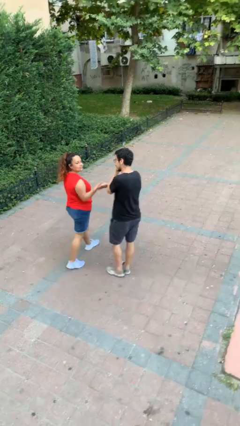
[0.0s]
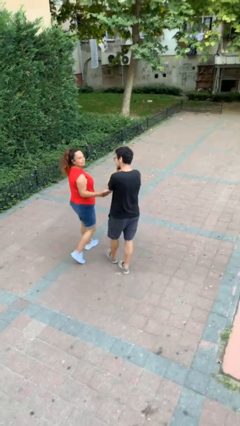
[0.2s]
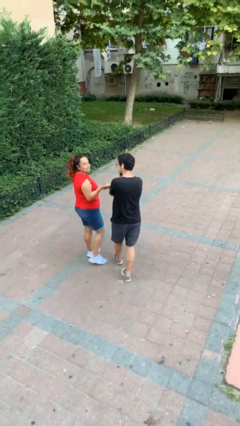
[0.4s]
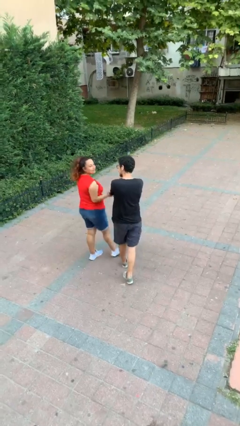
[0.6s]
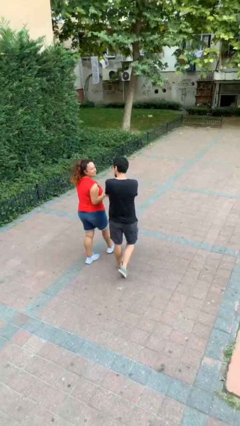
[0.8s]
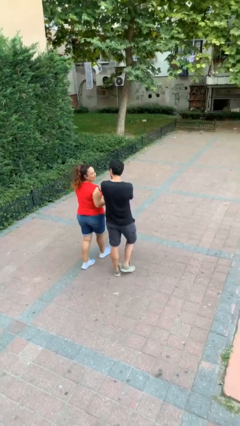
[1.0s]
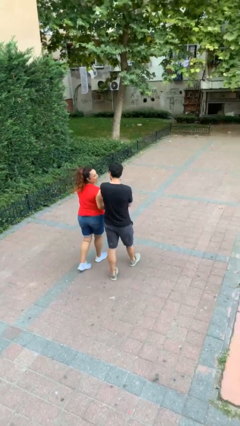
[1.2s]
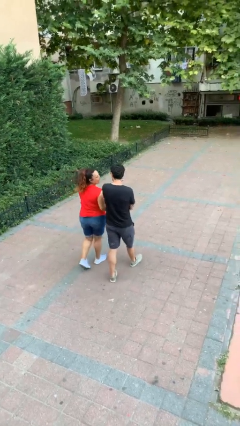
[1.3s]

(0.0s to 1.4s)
person shakes hand

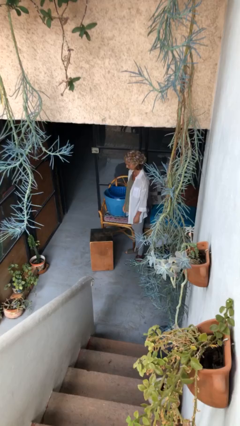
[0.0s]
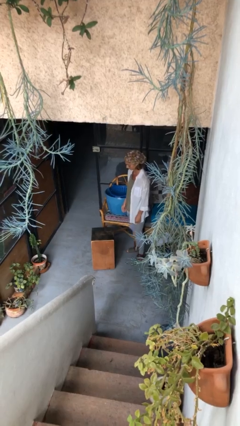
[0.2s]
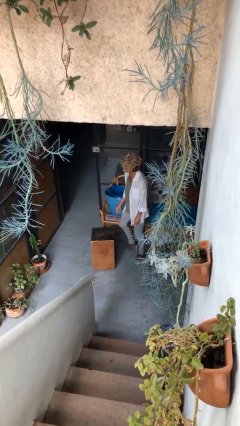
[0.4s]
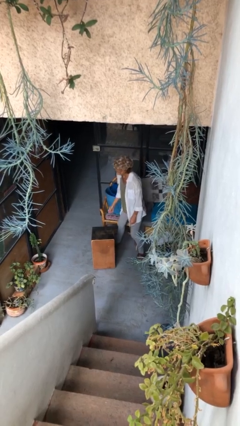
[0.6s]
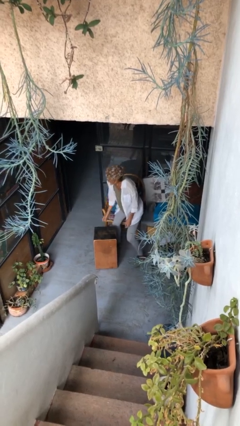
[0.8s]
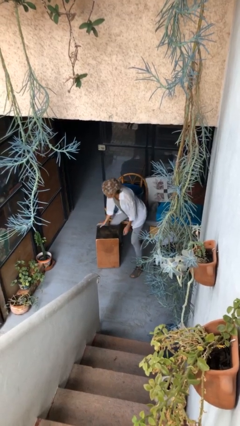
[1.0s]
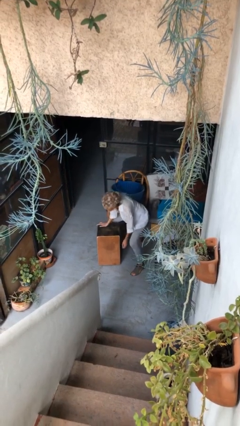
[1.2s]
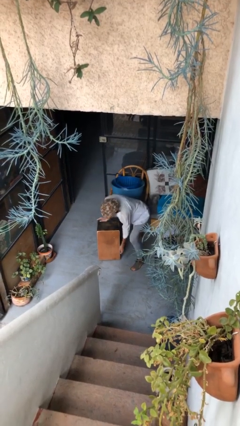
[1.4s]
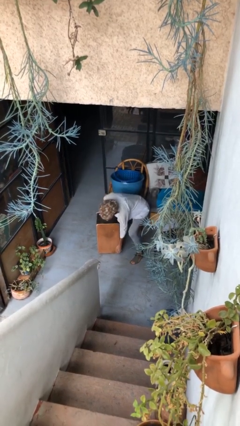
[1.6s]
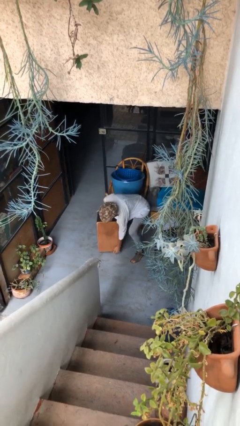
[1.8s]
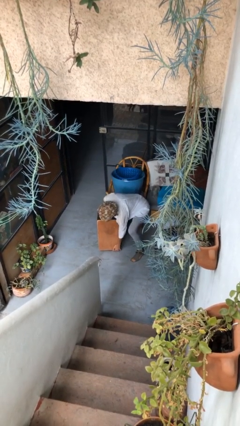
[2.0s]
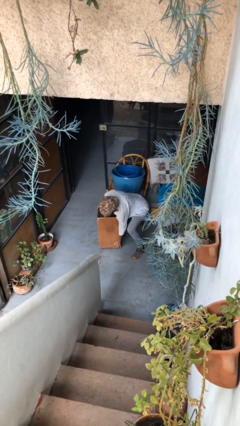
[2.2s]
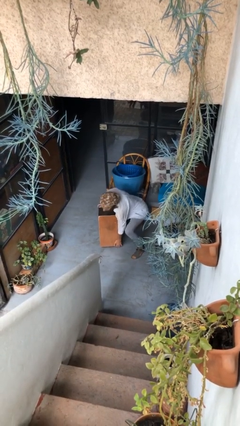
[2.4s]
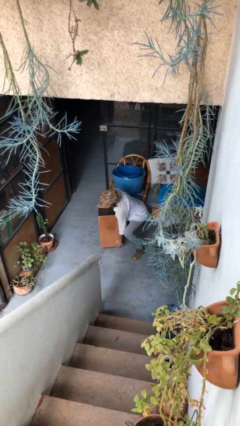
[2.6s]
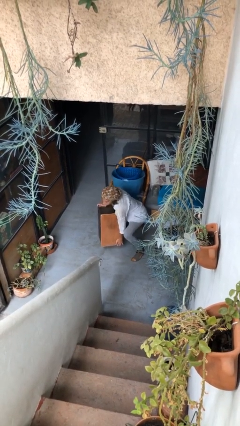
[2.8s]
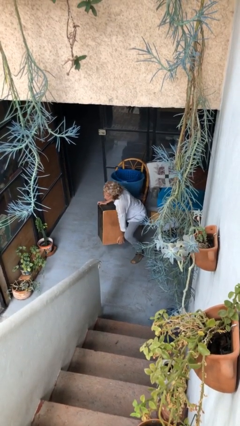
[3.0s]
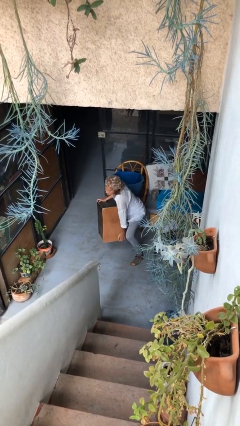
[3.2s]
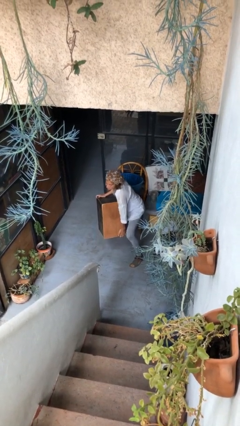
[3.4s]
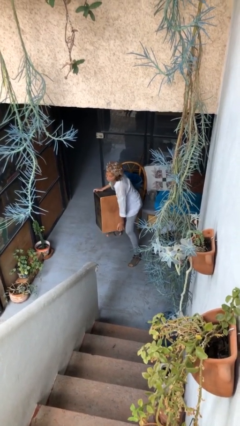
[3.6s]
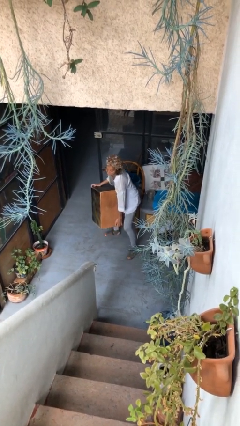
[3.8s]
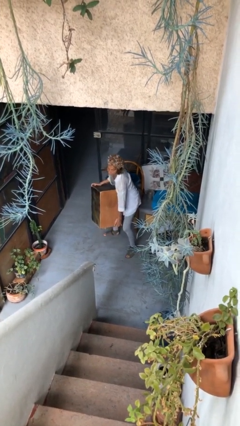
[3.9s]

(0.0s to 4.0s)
person picks up object from floor

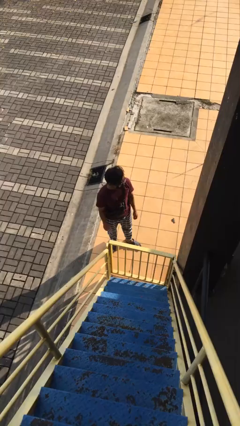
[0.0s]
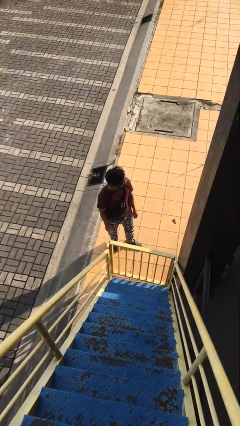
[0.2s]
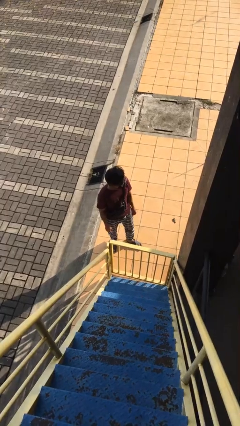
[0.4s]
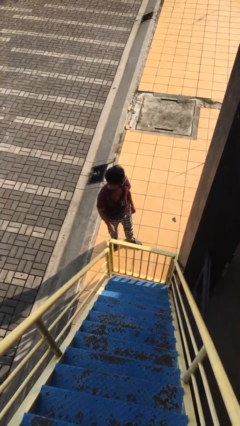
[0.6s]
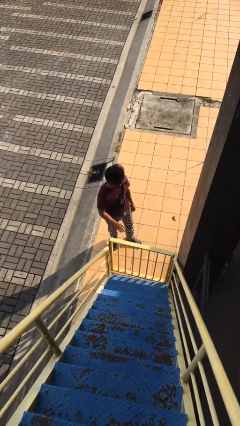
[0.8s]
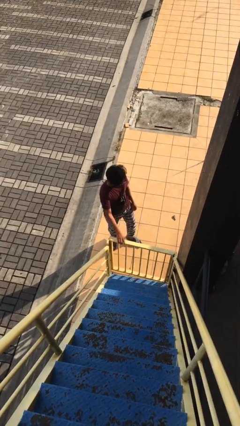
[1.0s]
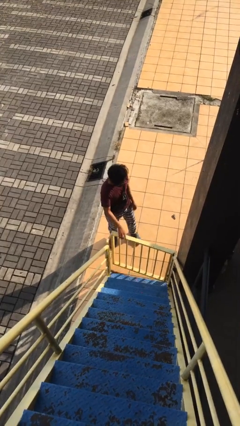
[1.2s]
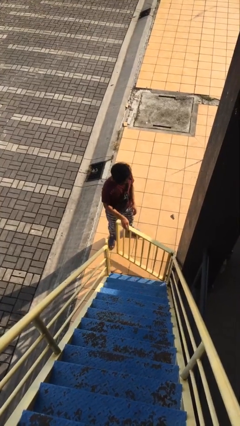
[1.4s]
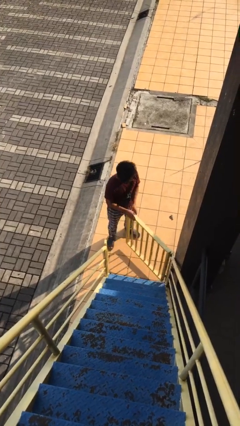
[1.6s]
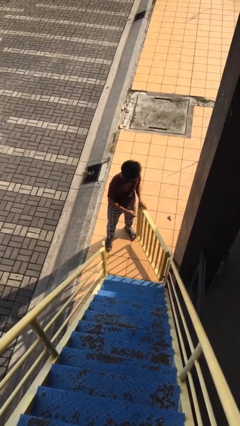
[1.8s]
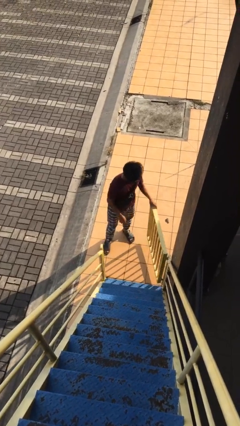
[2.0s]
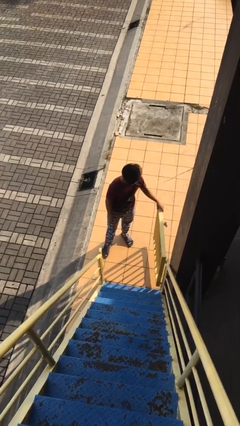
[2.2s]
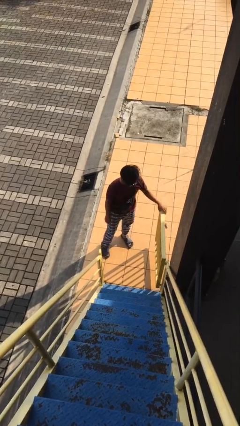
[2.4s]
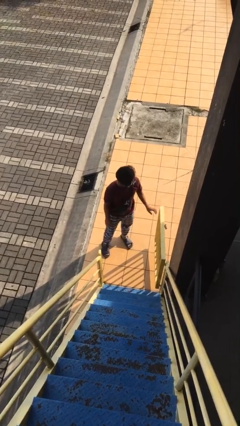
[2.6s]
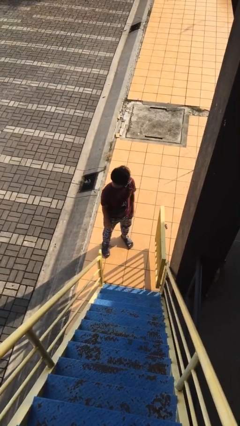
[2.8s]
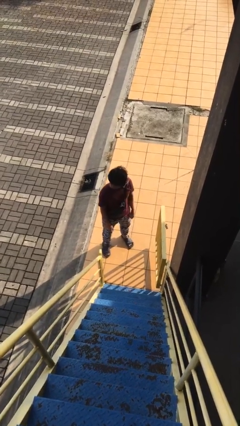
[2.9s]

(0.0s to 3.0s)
person opens facility door

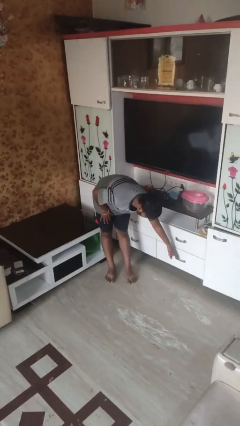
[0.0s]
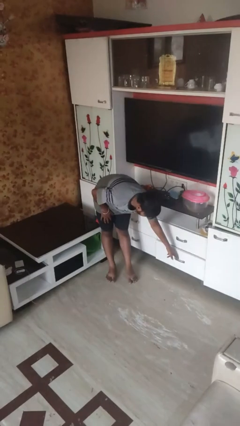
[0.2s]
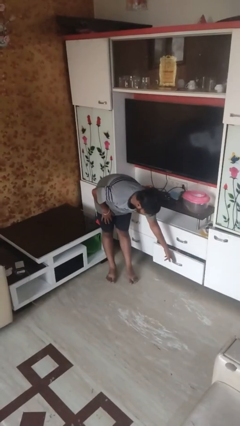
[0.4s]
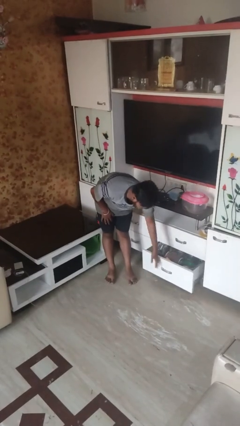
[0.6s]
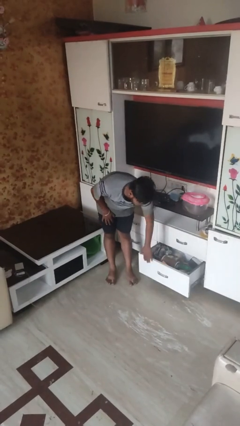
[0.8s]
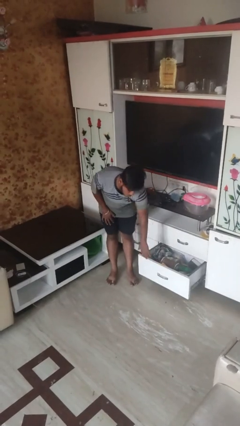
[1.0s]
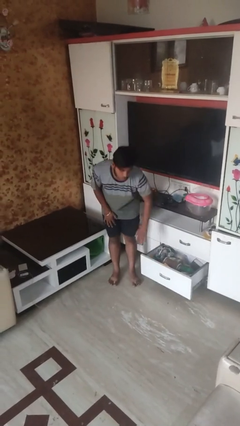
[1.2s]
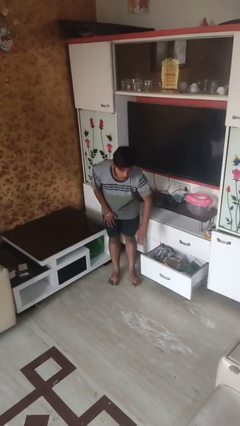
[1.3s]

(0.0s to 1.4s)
person opens dresser drawer

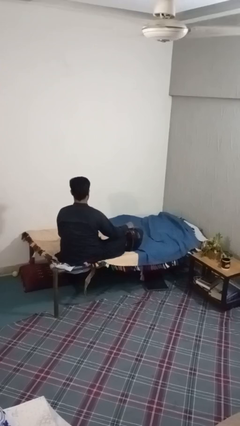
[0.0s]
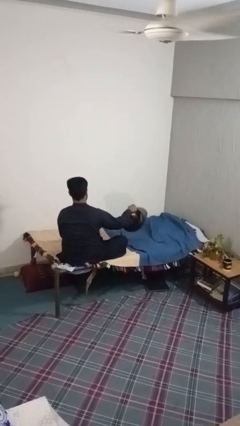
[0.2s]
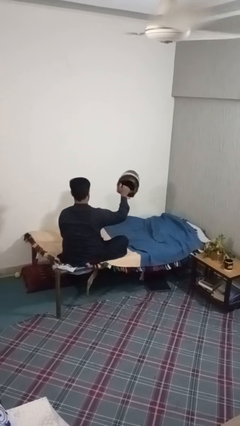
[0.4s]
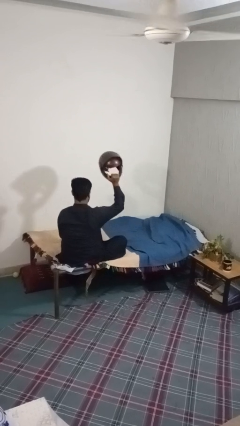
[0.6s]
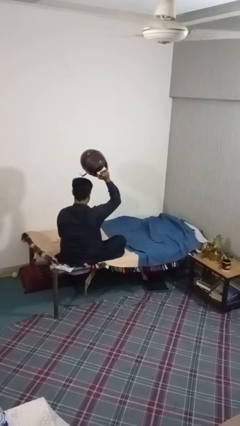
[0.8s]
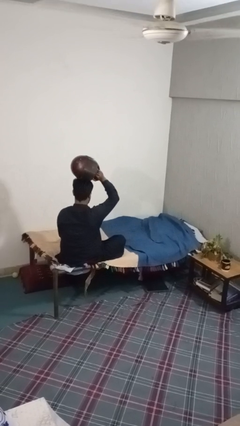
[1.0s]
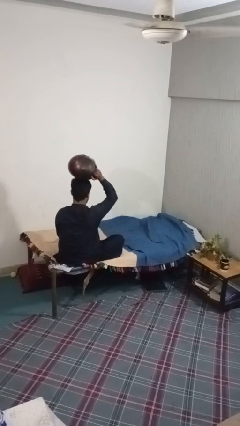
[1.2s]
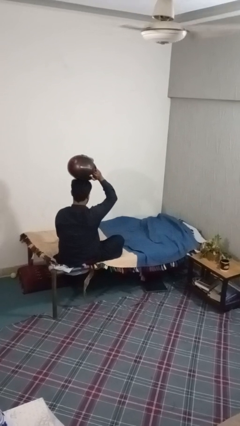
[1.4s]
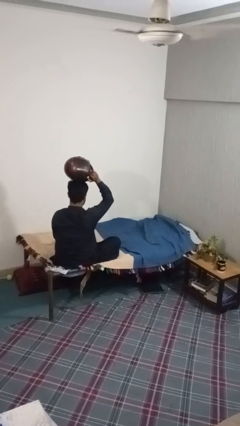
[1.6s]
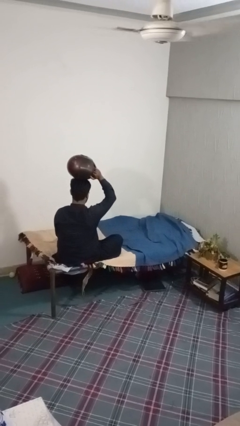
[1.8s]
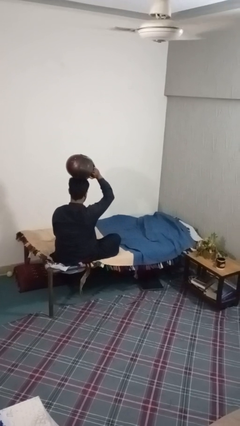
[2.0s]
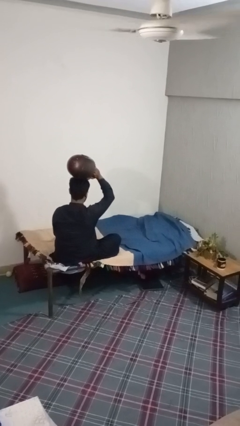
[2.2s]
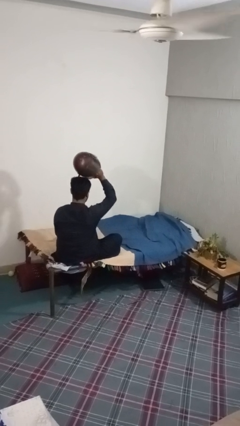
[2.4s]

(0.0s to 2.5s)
person holds object above head

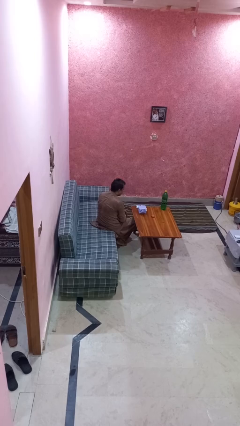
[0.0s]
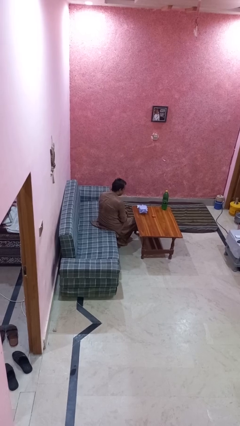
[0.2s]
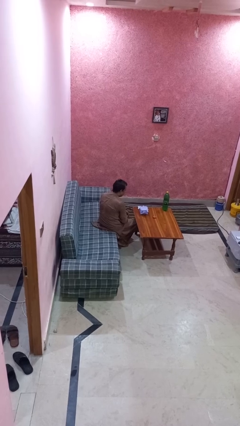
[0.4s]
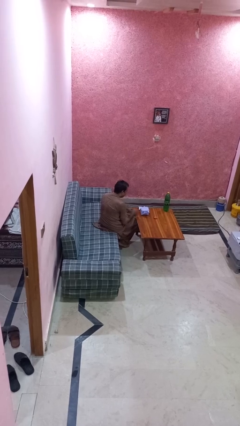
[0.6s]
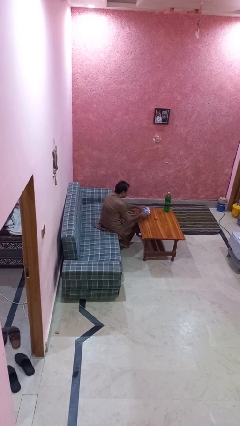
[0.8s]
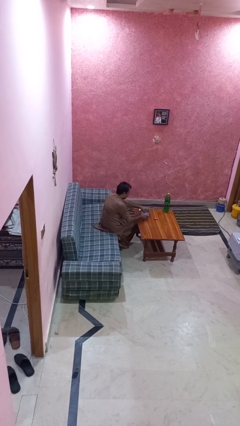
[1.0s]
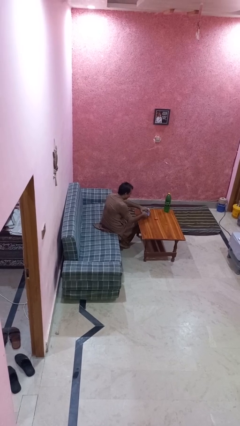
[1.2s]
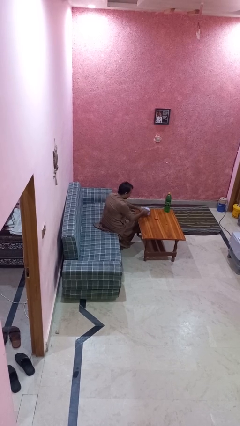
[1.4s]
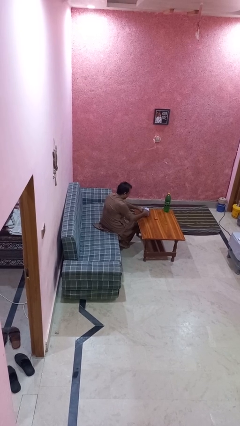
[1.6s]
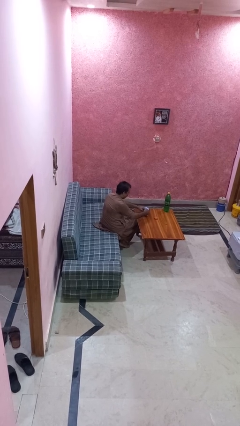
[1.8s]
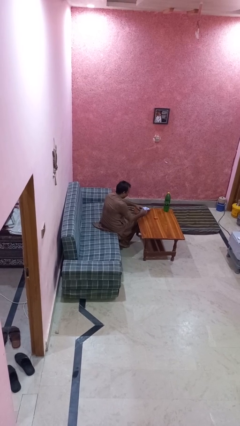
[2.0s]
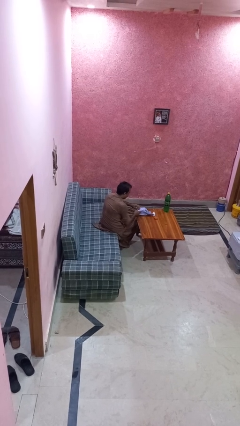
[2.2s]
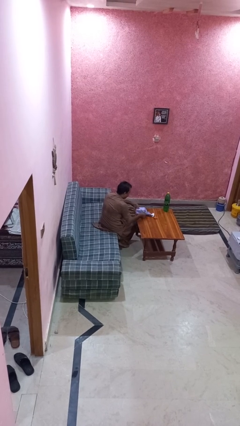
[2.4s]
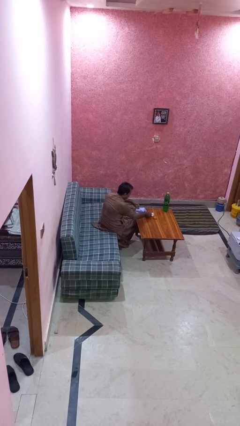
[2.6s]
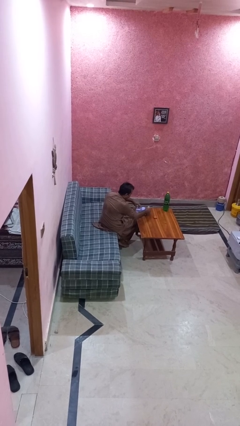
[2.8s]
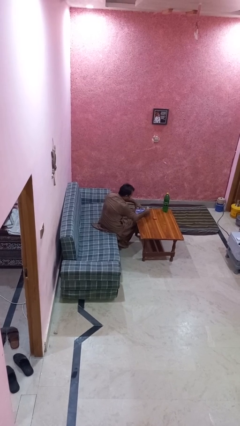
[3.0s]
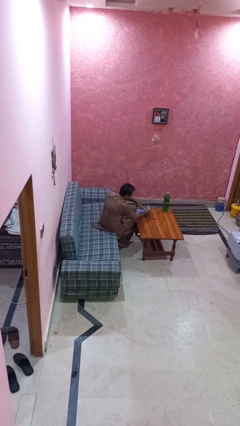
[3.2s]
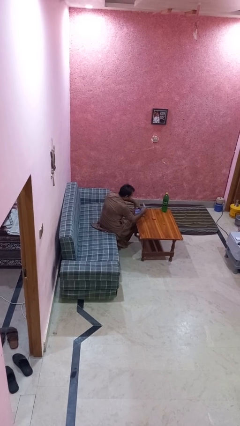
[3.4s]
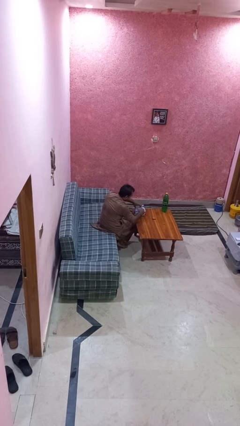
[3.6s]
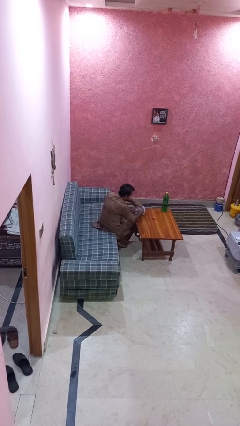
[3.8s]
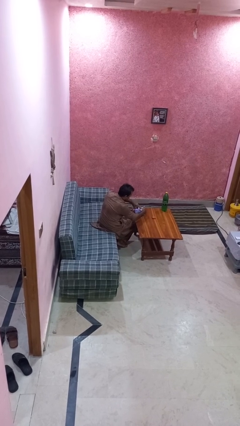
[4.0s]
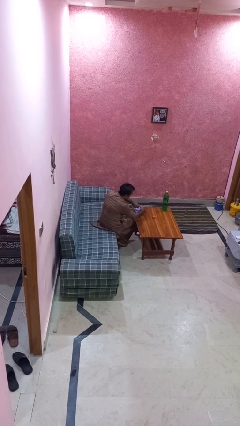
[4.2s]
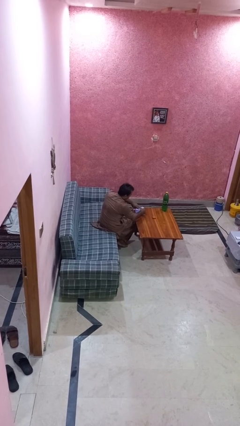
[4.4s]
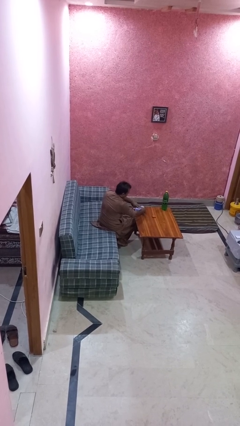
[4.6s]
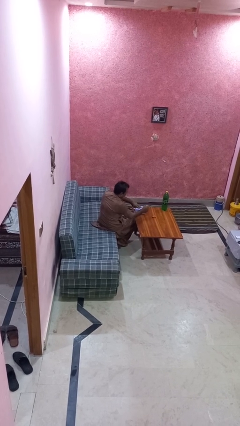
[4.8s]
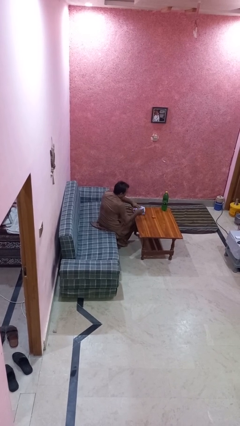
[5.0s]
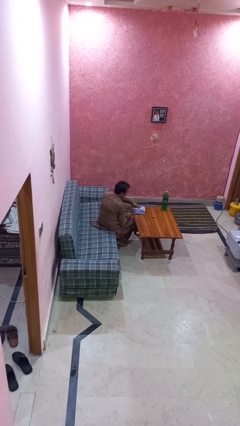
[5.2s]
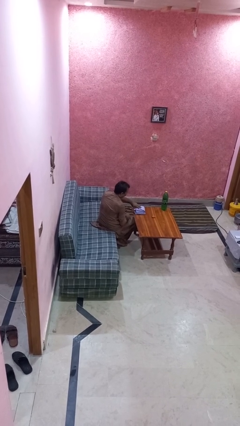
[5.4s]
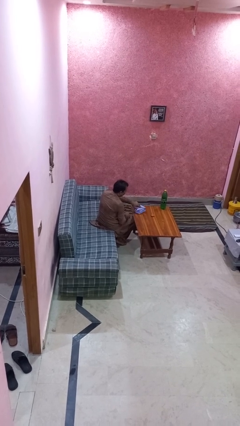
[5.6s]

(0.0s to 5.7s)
person wraps box
